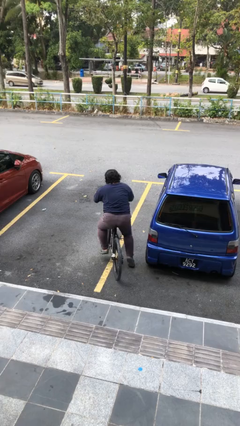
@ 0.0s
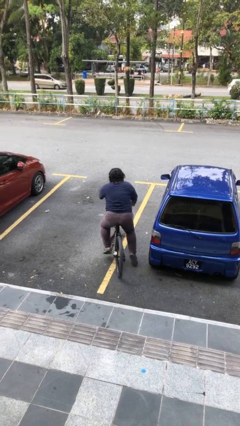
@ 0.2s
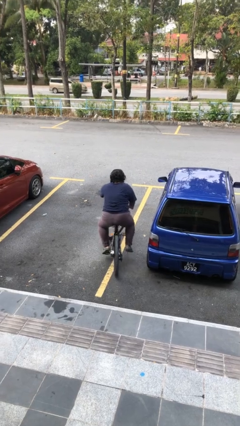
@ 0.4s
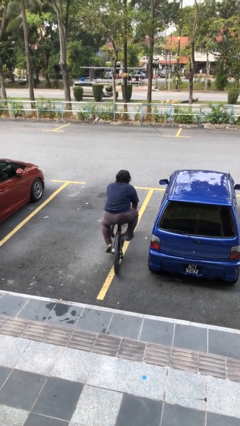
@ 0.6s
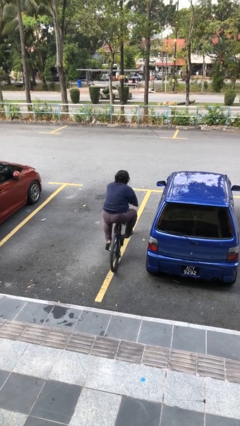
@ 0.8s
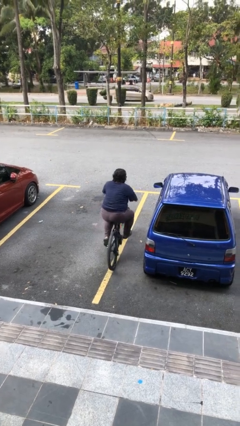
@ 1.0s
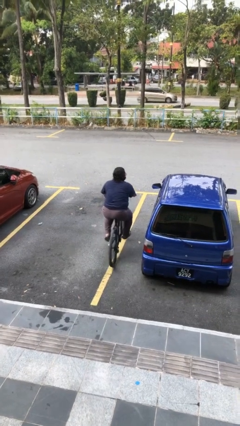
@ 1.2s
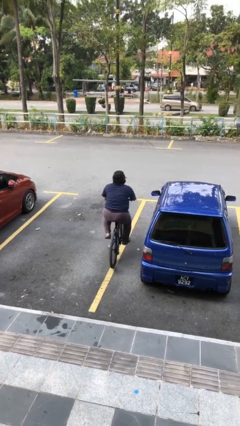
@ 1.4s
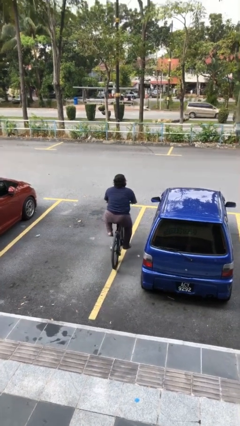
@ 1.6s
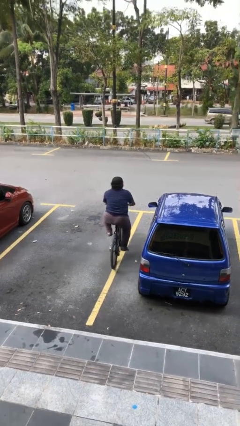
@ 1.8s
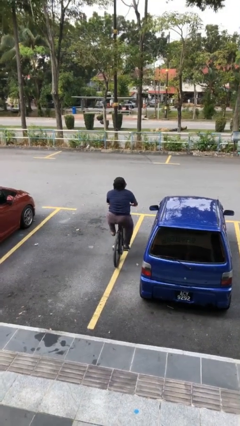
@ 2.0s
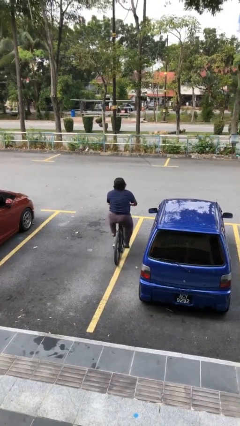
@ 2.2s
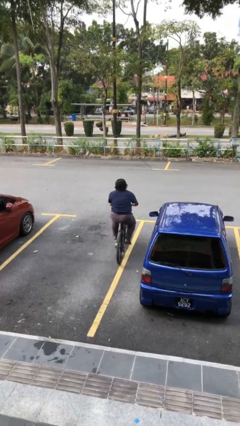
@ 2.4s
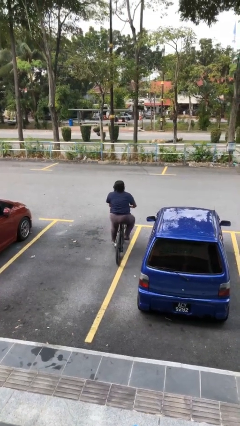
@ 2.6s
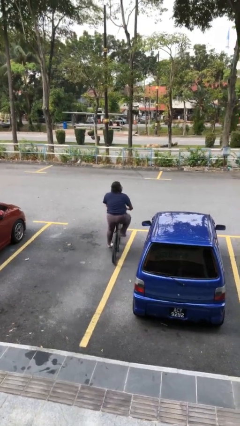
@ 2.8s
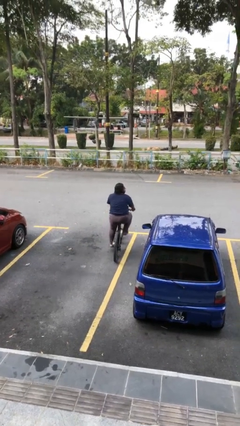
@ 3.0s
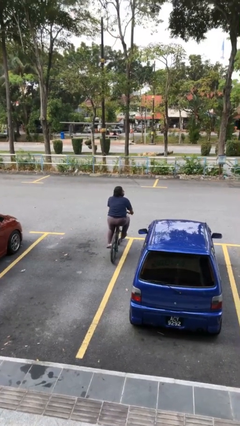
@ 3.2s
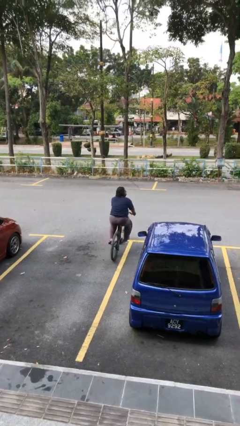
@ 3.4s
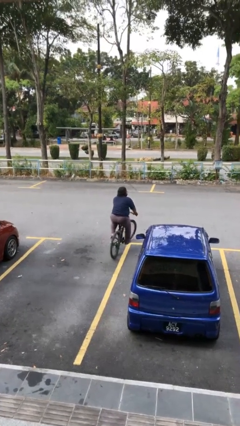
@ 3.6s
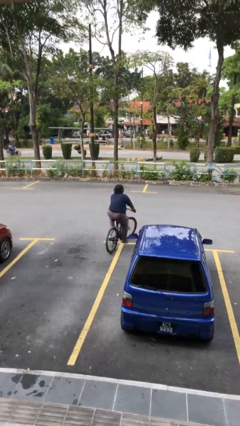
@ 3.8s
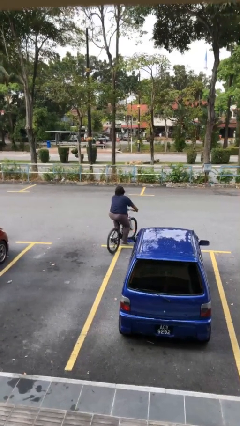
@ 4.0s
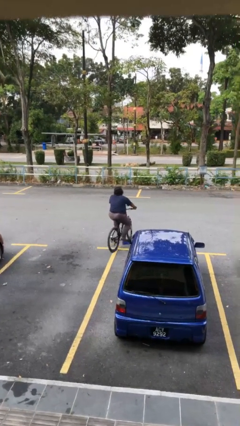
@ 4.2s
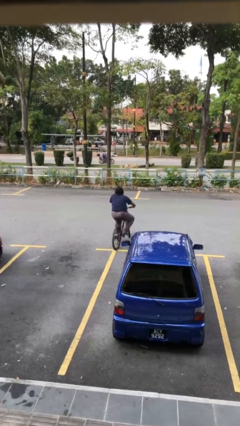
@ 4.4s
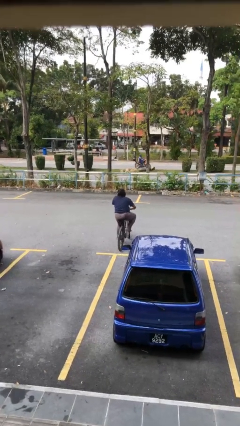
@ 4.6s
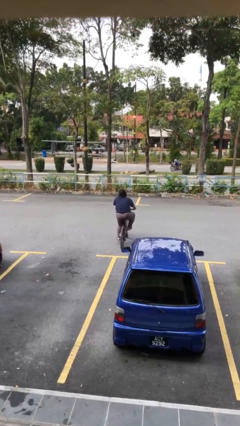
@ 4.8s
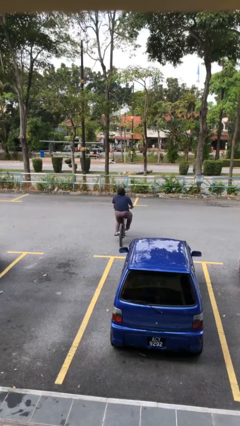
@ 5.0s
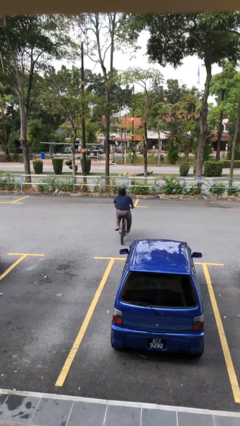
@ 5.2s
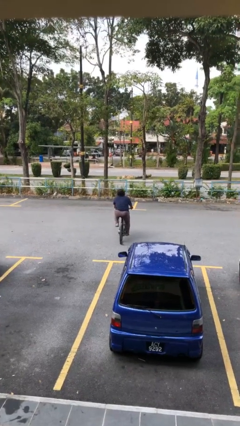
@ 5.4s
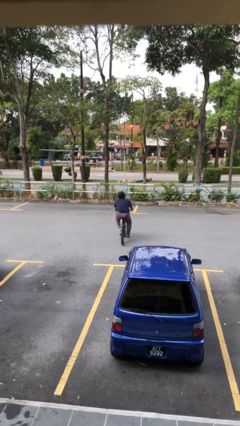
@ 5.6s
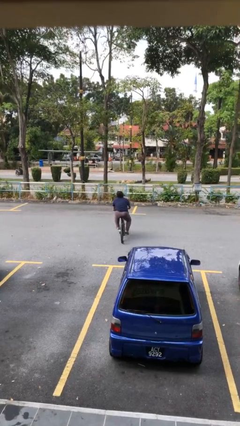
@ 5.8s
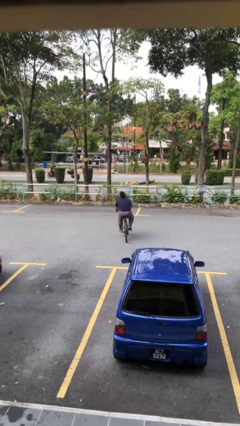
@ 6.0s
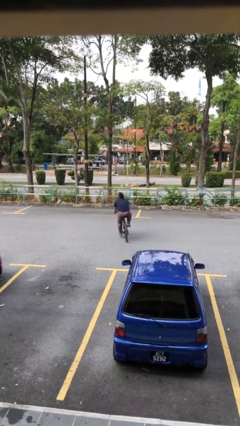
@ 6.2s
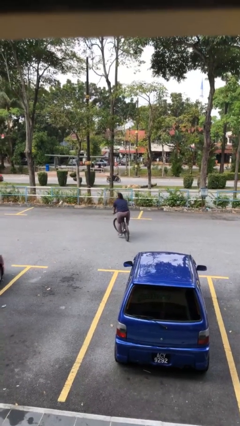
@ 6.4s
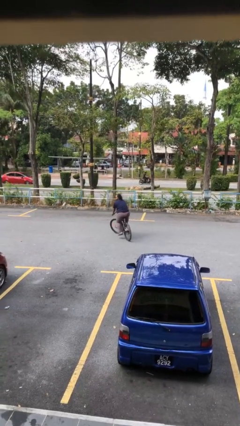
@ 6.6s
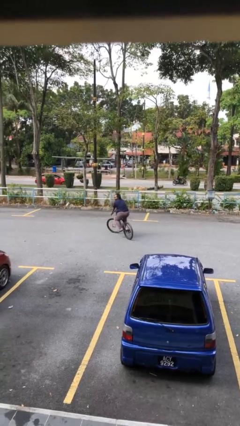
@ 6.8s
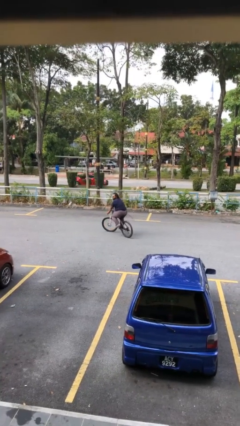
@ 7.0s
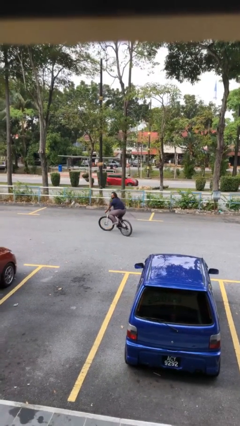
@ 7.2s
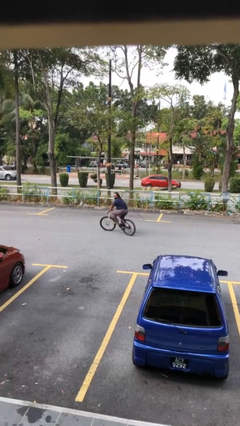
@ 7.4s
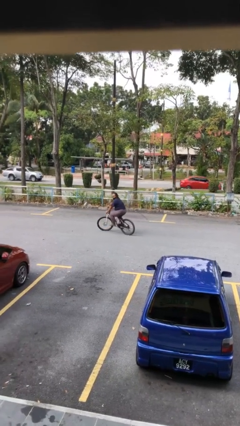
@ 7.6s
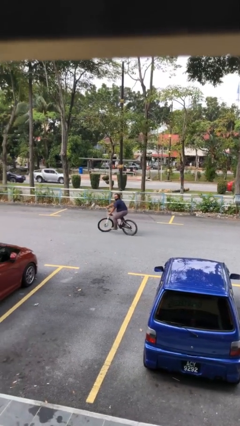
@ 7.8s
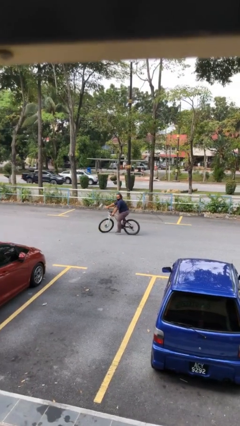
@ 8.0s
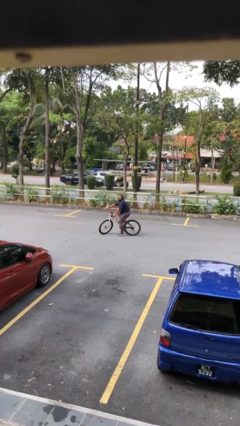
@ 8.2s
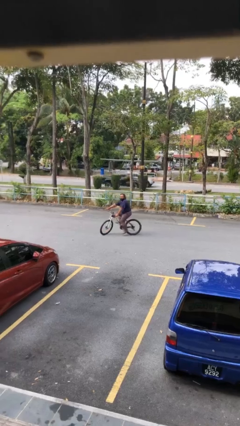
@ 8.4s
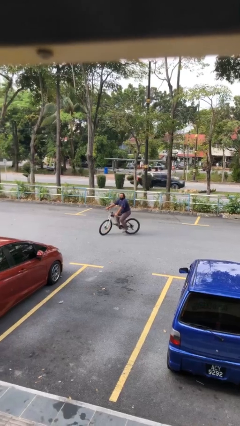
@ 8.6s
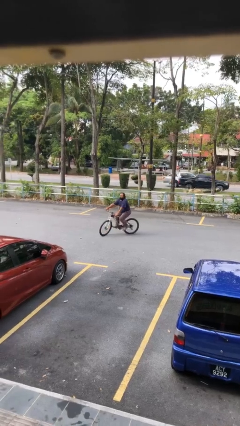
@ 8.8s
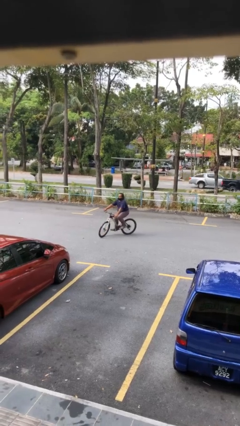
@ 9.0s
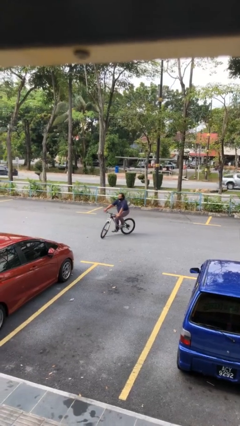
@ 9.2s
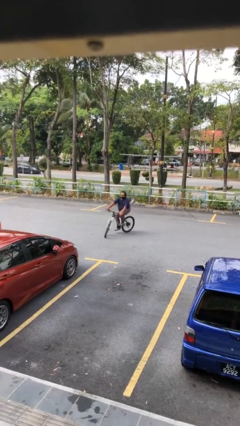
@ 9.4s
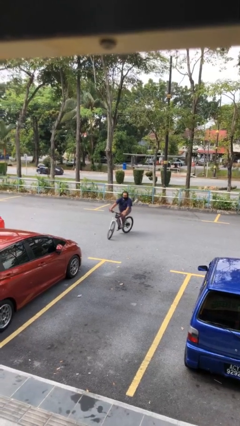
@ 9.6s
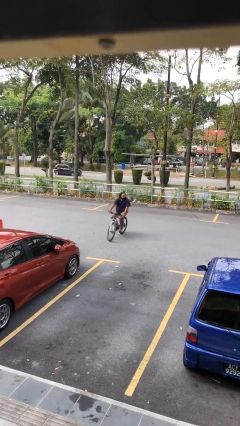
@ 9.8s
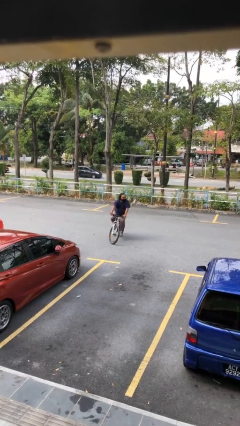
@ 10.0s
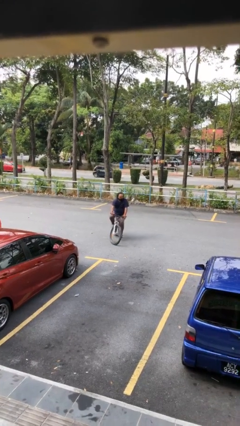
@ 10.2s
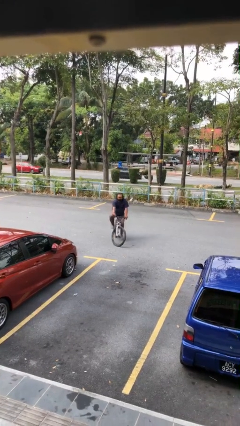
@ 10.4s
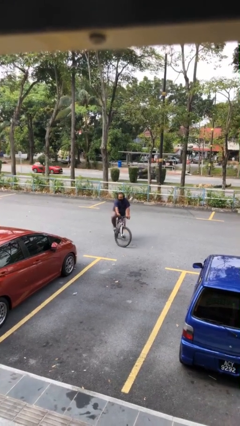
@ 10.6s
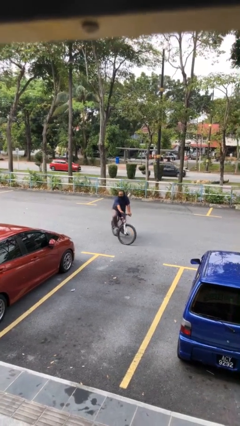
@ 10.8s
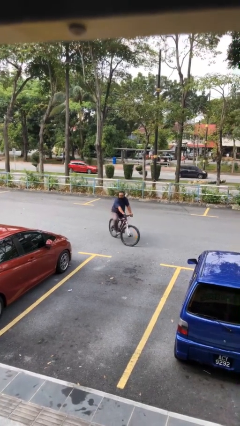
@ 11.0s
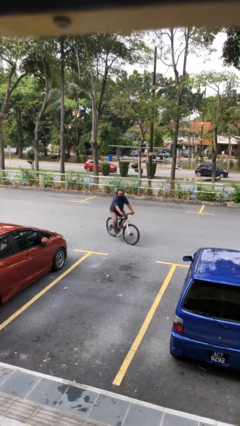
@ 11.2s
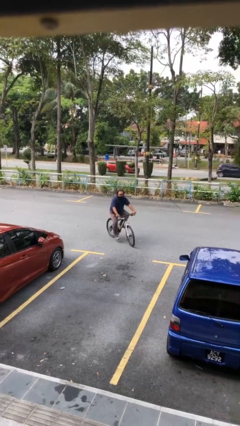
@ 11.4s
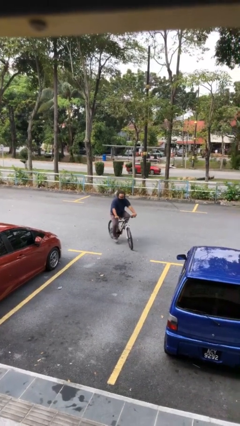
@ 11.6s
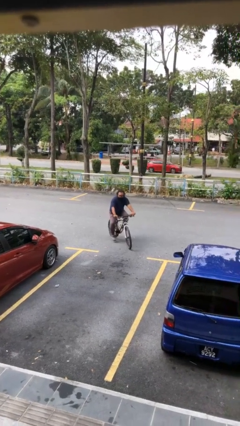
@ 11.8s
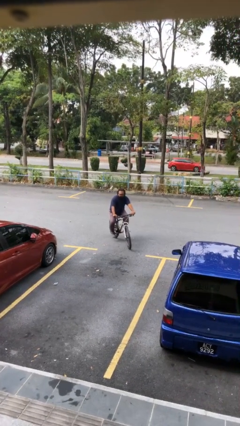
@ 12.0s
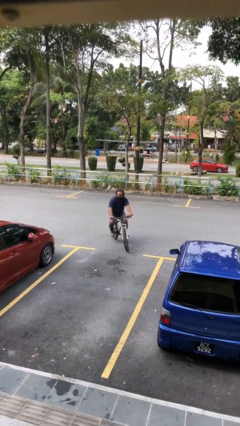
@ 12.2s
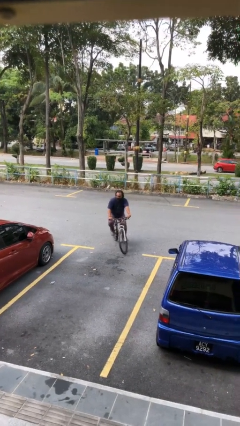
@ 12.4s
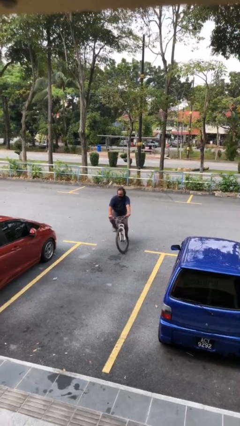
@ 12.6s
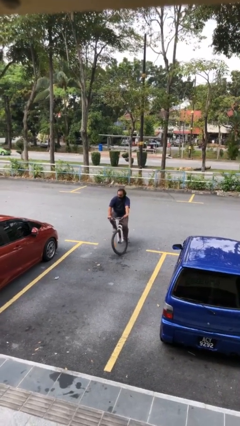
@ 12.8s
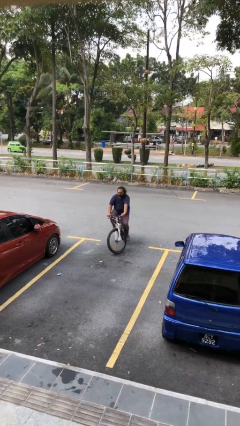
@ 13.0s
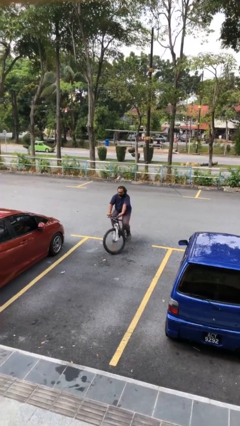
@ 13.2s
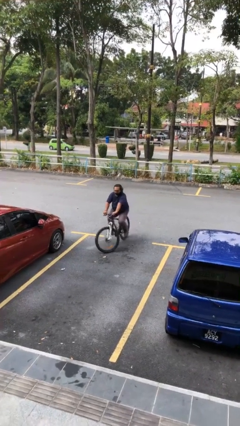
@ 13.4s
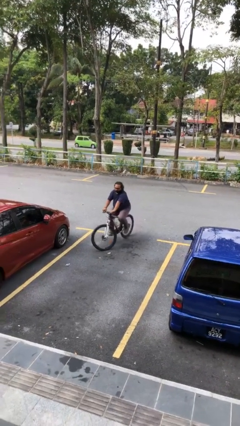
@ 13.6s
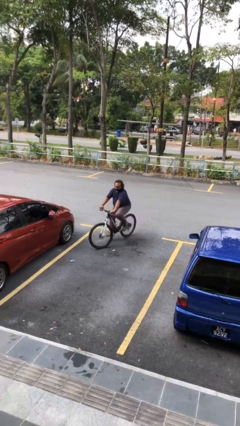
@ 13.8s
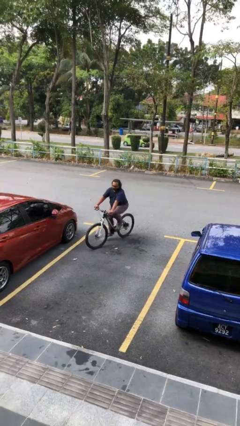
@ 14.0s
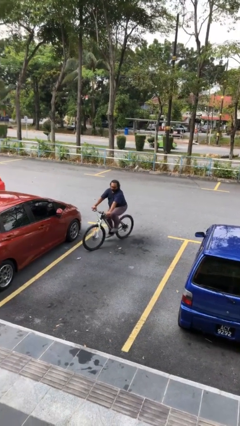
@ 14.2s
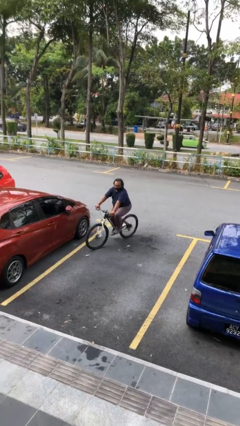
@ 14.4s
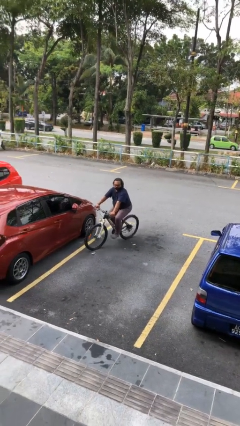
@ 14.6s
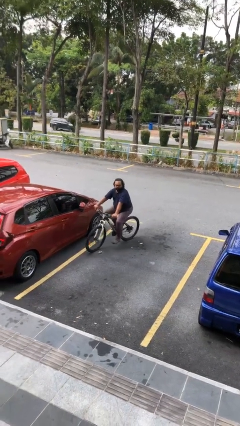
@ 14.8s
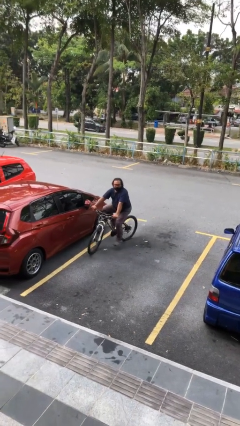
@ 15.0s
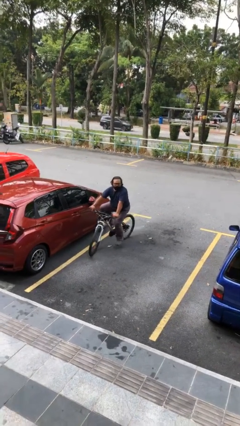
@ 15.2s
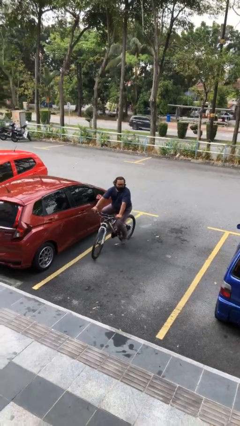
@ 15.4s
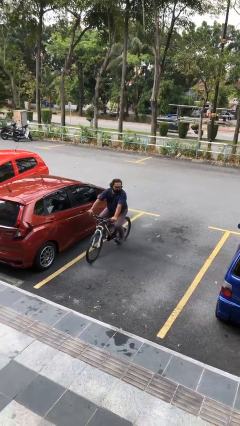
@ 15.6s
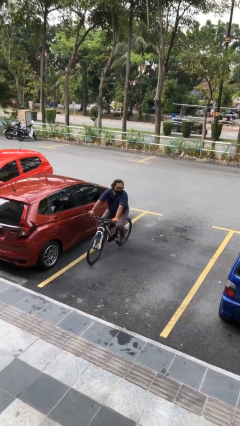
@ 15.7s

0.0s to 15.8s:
person rides bicycle

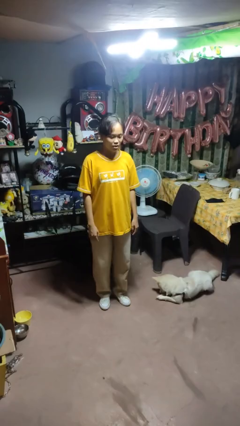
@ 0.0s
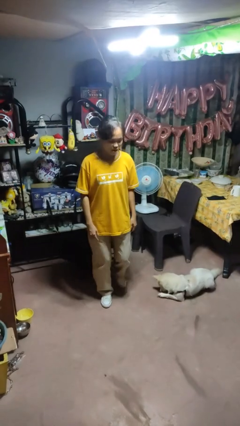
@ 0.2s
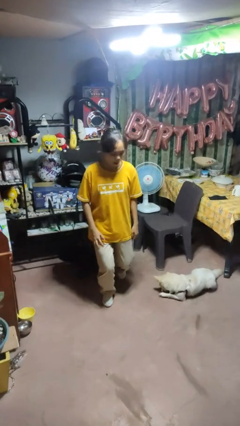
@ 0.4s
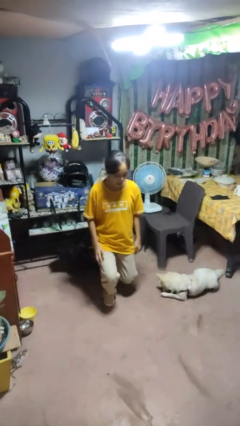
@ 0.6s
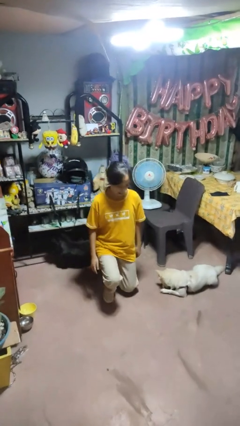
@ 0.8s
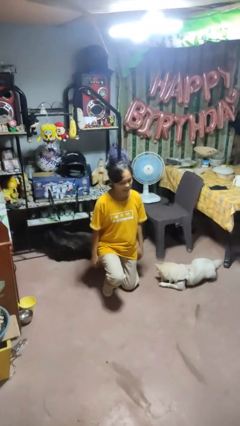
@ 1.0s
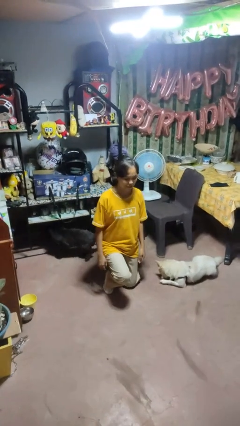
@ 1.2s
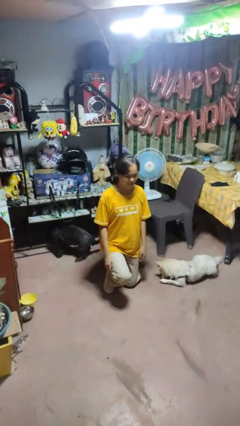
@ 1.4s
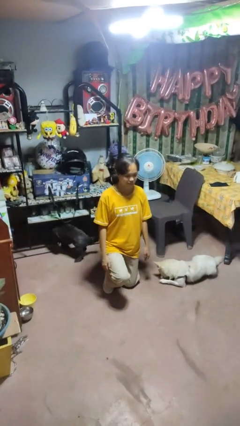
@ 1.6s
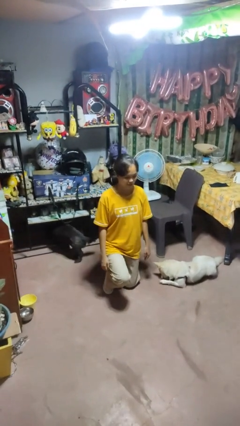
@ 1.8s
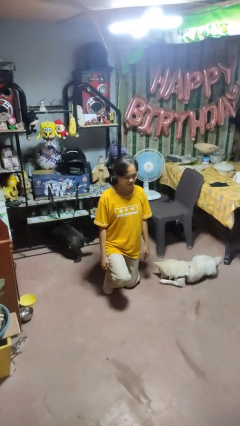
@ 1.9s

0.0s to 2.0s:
person kneels
